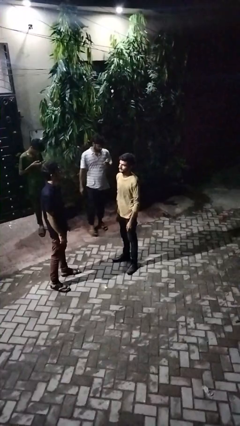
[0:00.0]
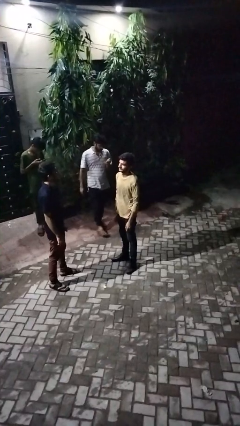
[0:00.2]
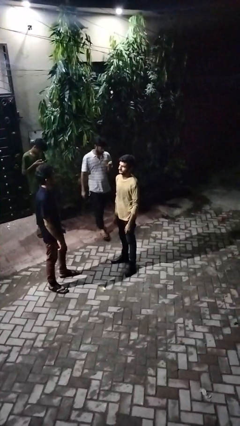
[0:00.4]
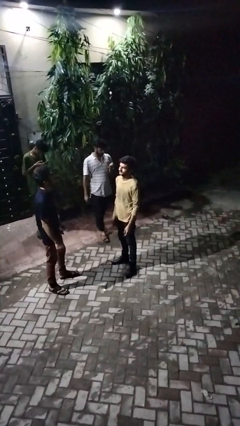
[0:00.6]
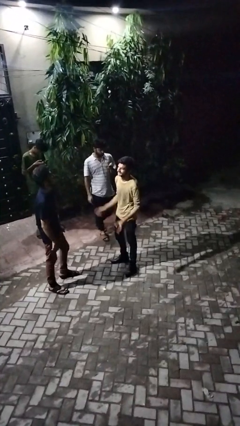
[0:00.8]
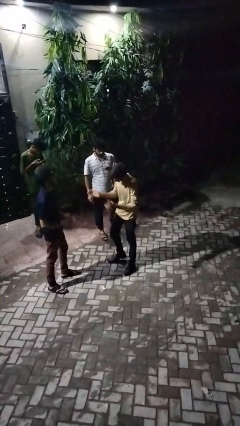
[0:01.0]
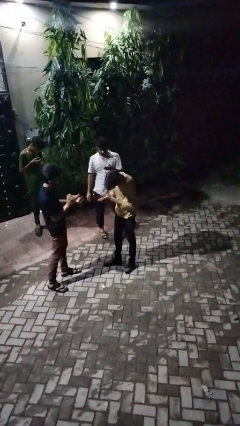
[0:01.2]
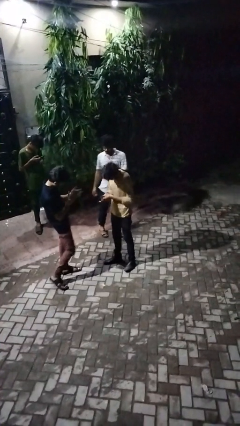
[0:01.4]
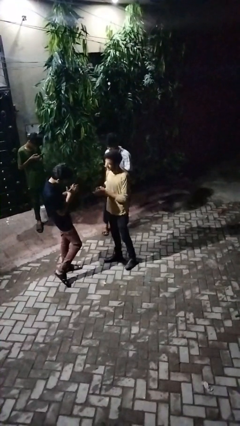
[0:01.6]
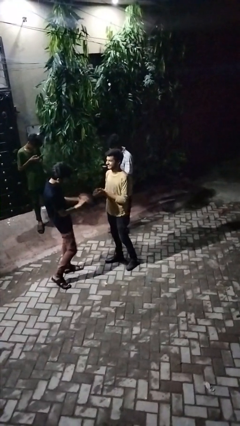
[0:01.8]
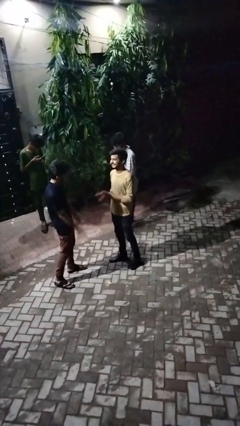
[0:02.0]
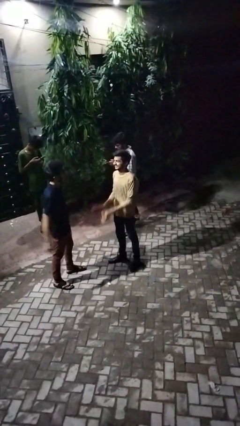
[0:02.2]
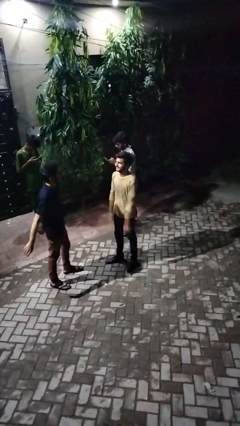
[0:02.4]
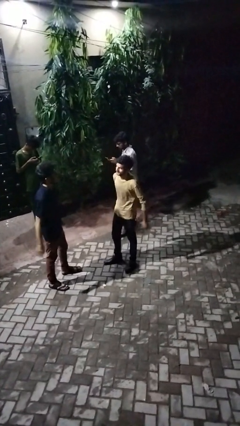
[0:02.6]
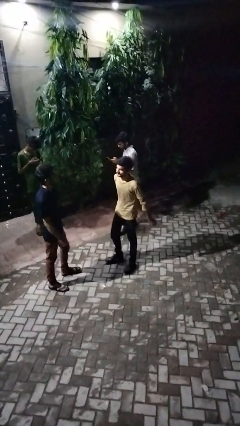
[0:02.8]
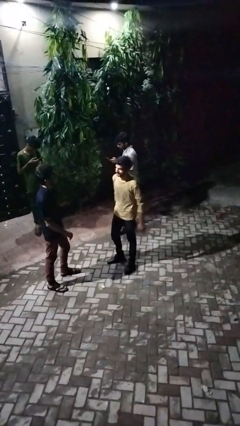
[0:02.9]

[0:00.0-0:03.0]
person laughs with person

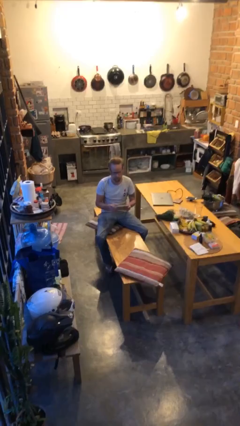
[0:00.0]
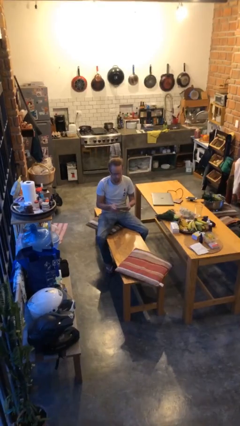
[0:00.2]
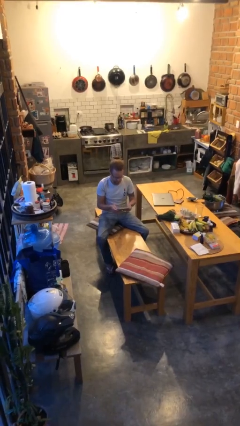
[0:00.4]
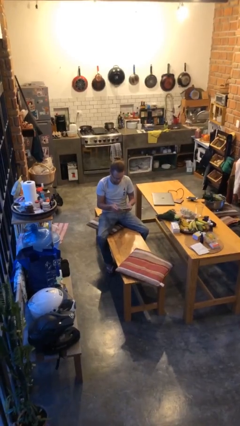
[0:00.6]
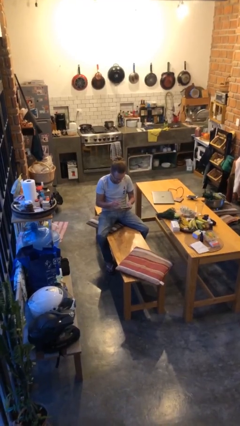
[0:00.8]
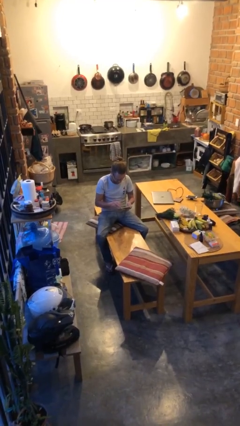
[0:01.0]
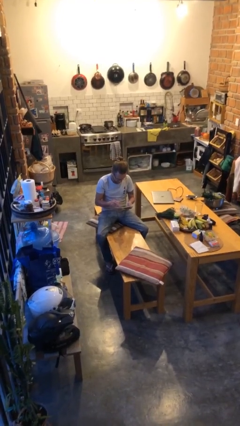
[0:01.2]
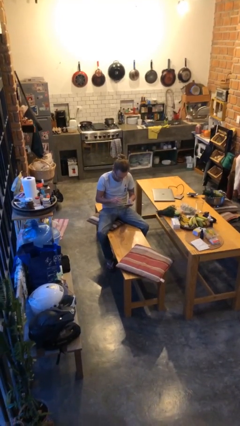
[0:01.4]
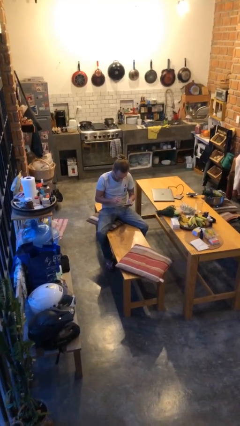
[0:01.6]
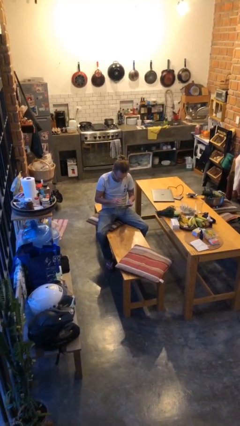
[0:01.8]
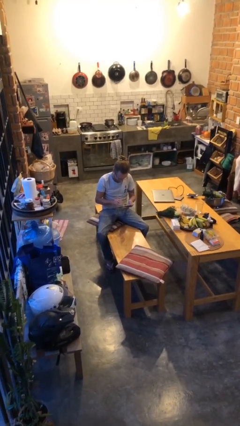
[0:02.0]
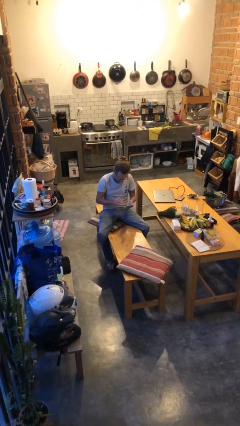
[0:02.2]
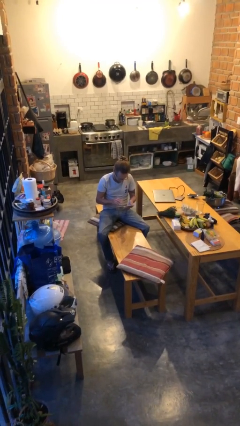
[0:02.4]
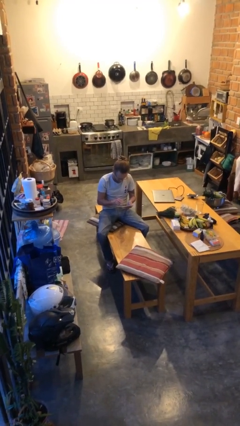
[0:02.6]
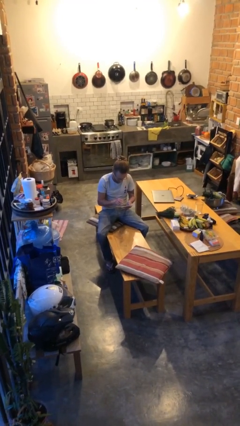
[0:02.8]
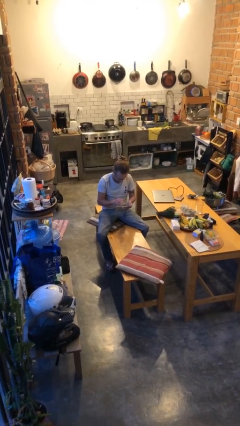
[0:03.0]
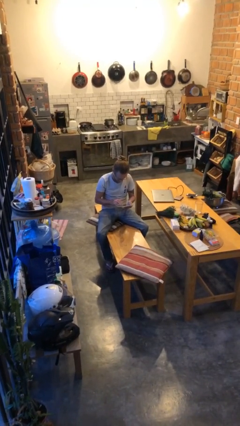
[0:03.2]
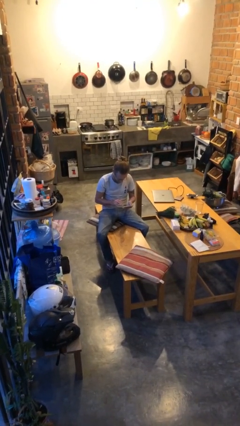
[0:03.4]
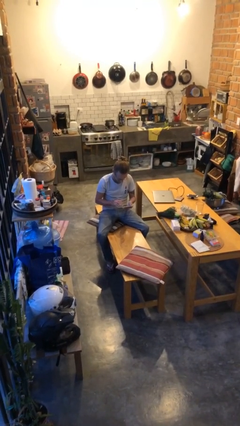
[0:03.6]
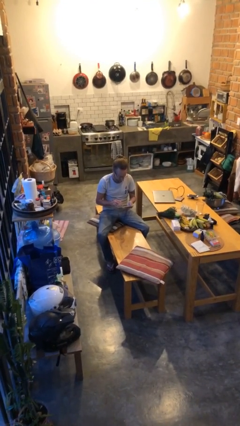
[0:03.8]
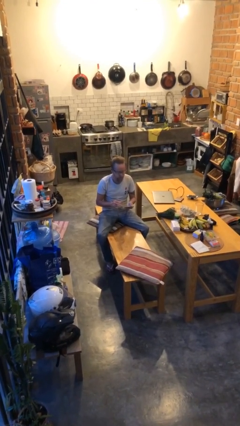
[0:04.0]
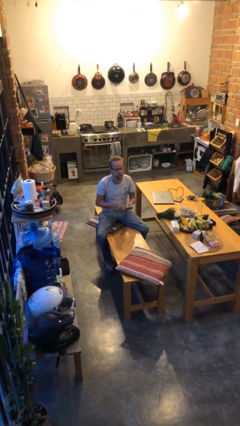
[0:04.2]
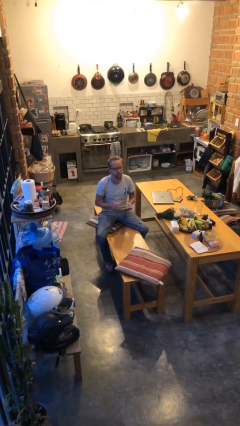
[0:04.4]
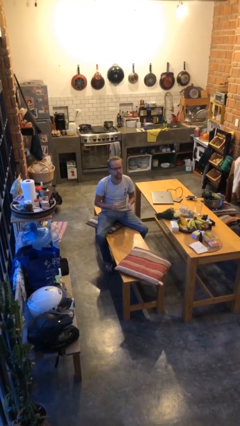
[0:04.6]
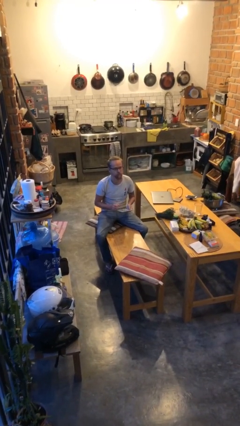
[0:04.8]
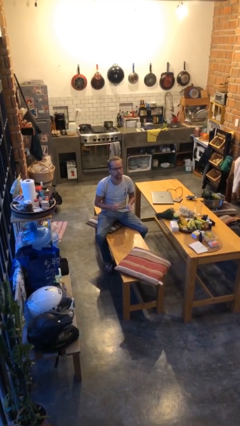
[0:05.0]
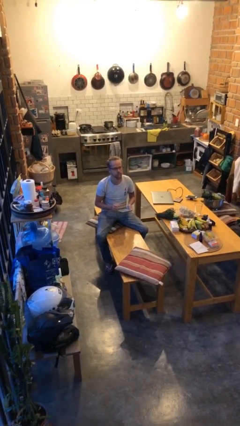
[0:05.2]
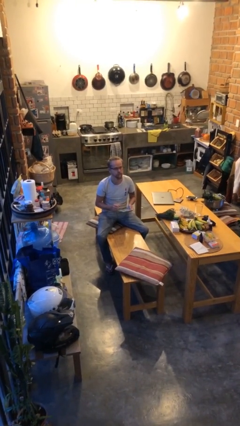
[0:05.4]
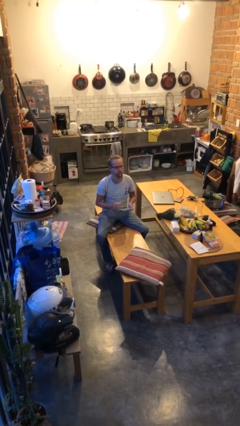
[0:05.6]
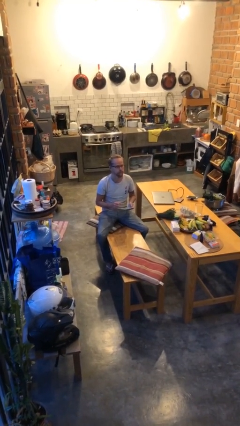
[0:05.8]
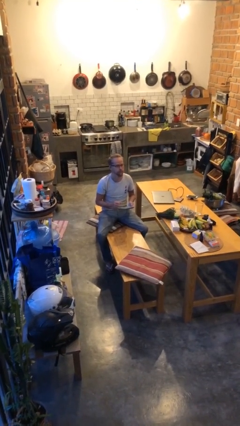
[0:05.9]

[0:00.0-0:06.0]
person interacts with tablet

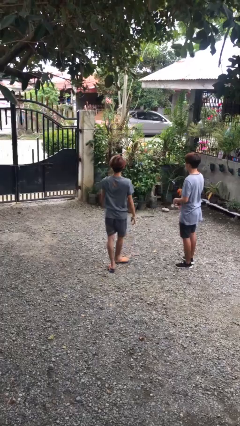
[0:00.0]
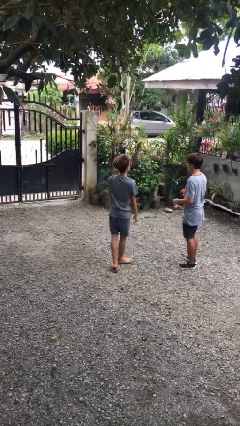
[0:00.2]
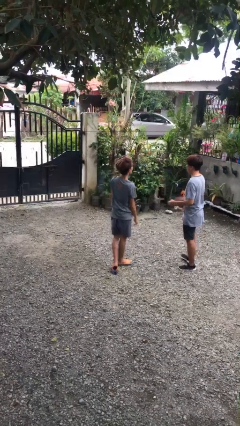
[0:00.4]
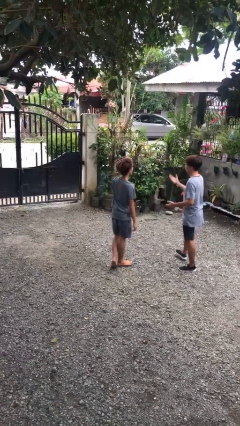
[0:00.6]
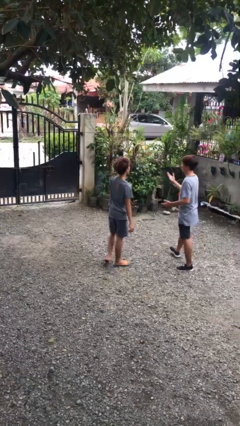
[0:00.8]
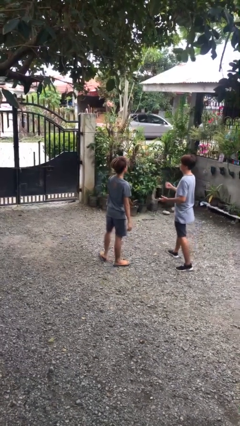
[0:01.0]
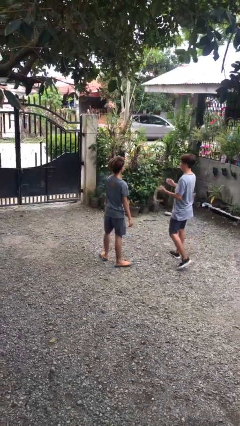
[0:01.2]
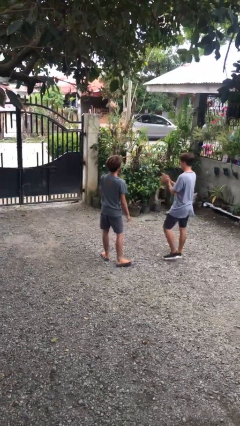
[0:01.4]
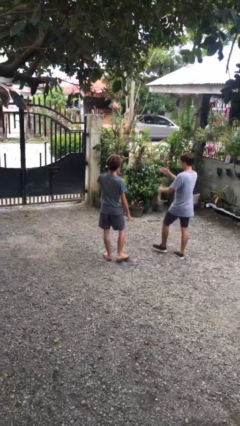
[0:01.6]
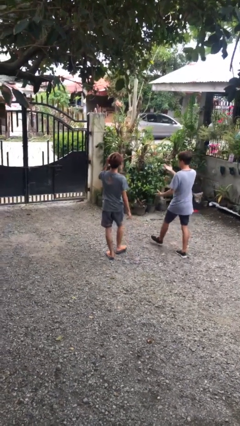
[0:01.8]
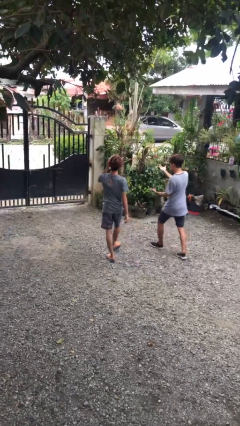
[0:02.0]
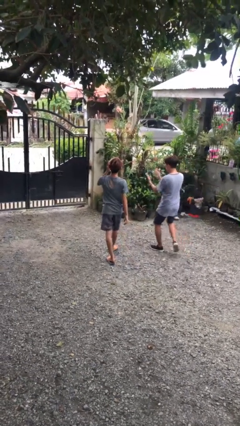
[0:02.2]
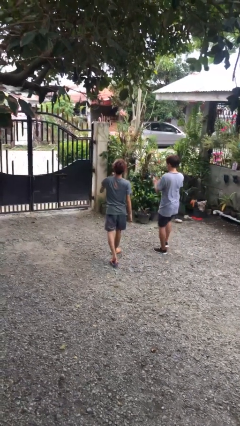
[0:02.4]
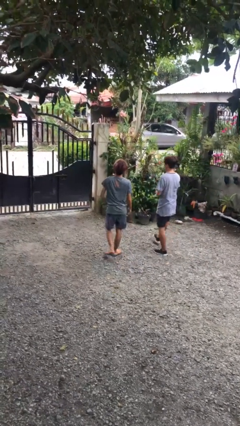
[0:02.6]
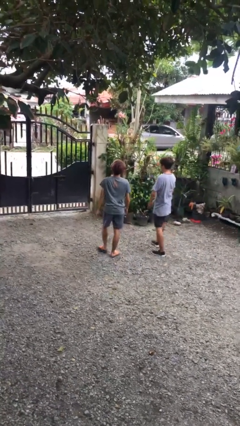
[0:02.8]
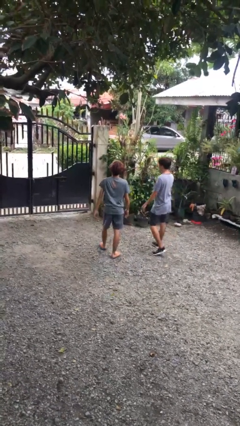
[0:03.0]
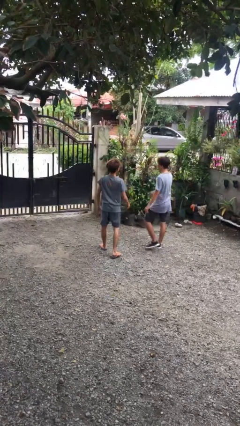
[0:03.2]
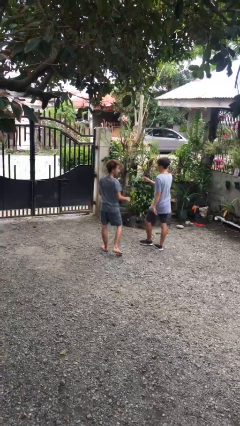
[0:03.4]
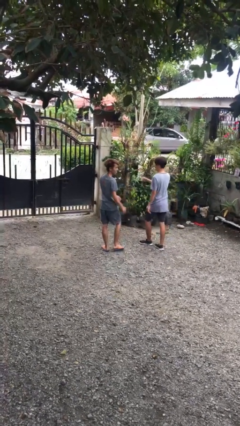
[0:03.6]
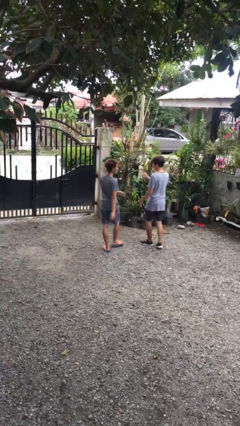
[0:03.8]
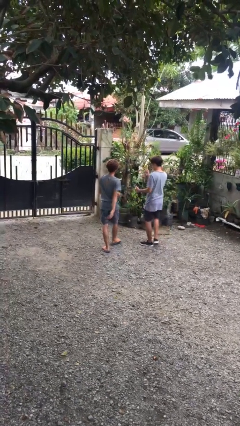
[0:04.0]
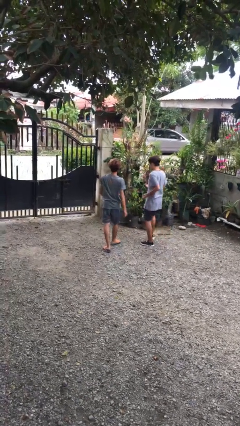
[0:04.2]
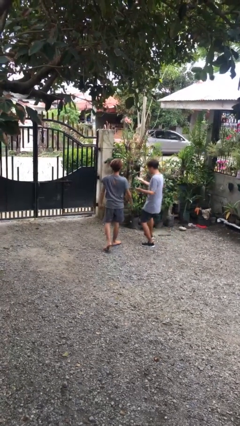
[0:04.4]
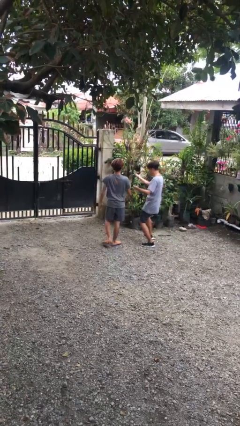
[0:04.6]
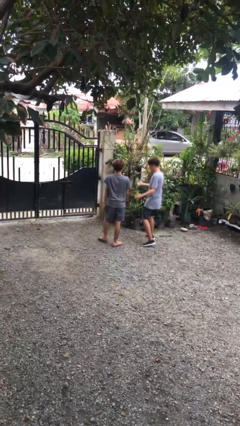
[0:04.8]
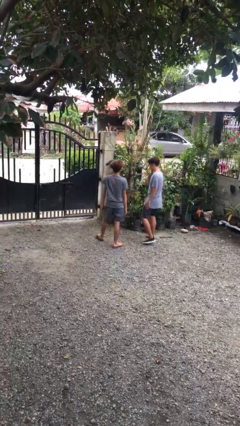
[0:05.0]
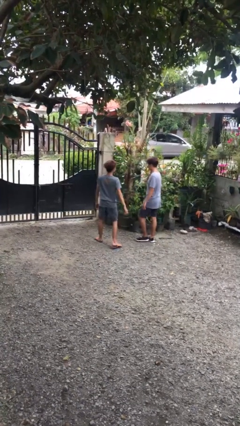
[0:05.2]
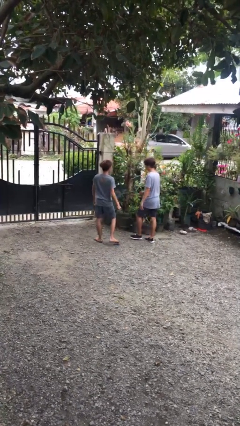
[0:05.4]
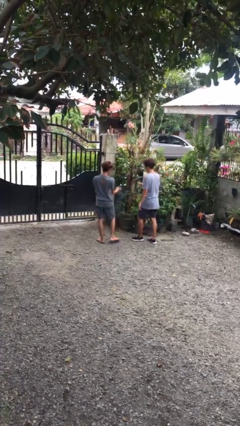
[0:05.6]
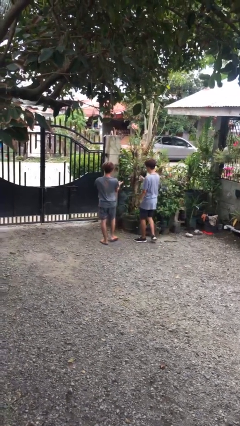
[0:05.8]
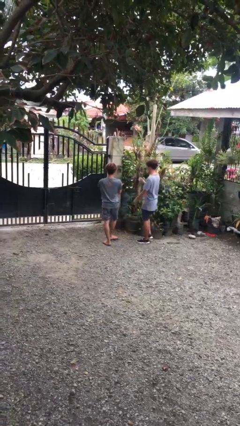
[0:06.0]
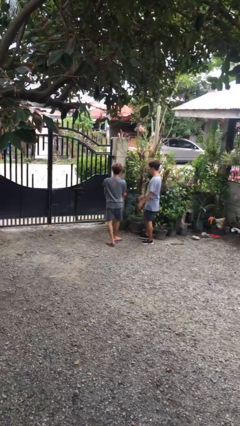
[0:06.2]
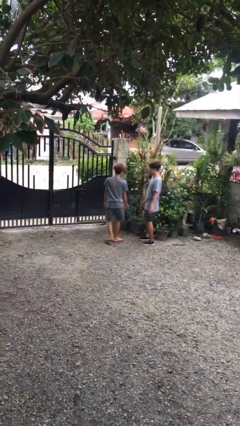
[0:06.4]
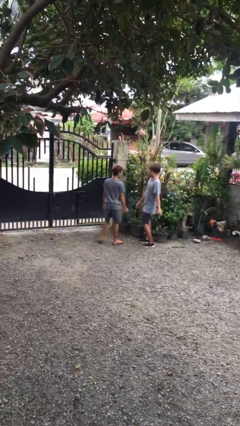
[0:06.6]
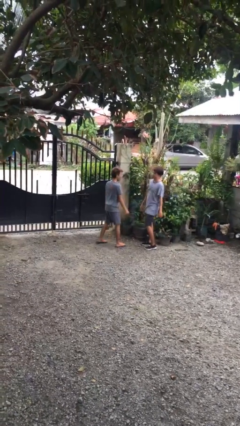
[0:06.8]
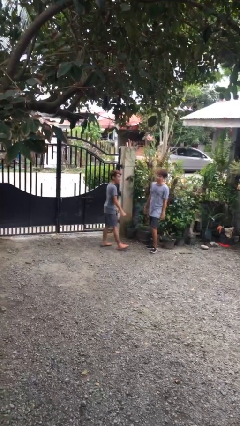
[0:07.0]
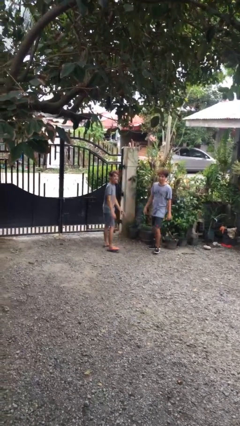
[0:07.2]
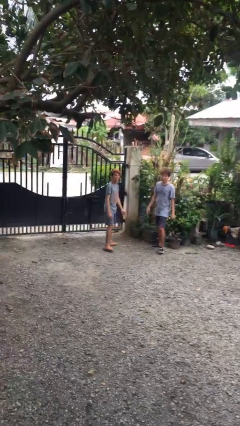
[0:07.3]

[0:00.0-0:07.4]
person talks to person

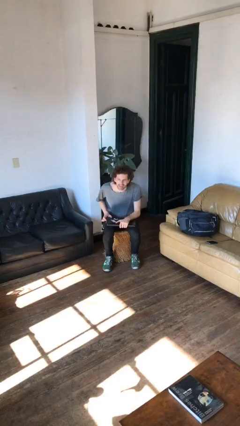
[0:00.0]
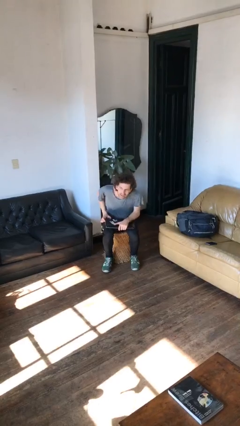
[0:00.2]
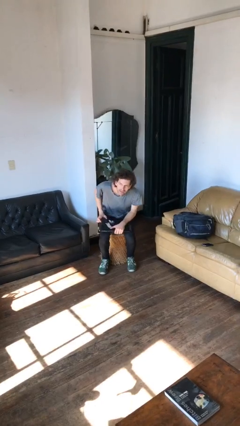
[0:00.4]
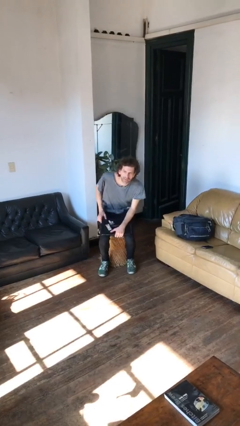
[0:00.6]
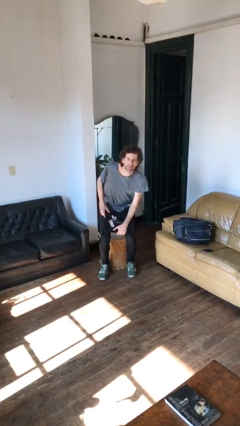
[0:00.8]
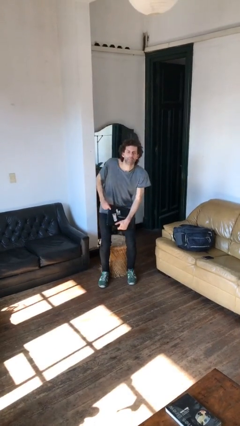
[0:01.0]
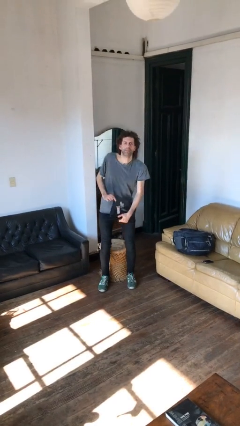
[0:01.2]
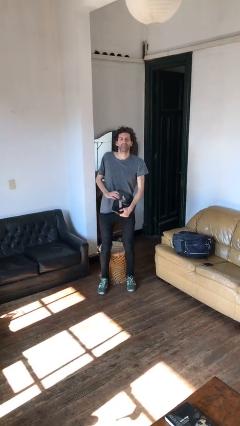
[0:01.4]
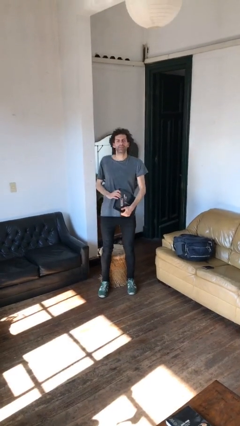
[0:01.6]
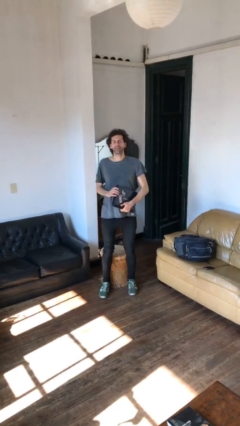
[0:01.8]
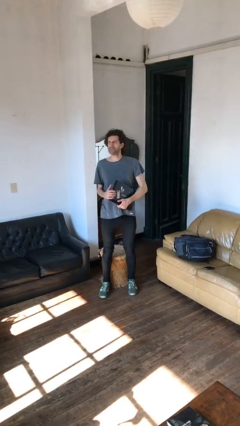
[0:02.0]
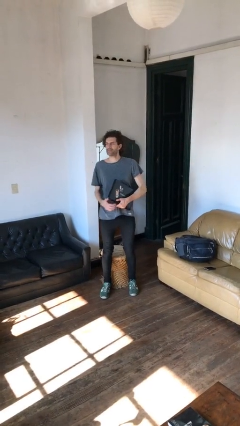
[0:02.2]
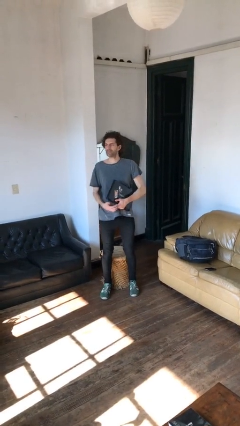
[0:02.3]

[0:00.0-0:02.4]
person stands up
